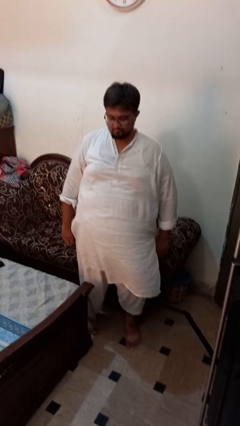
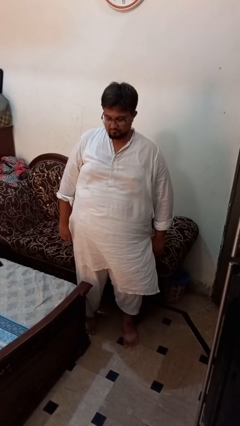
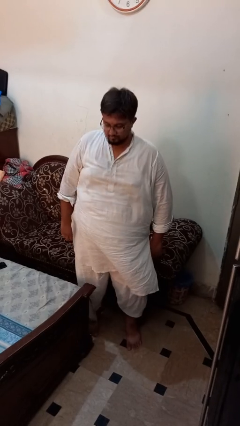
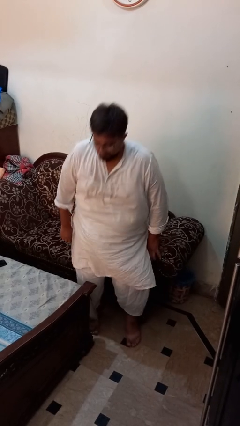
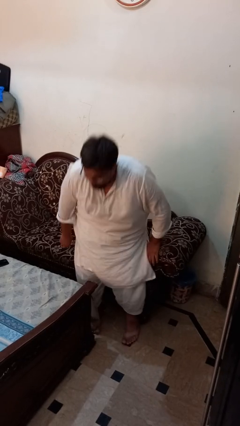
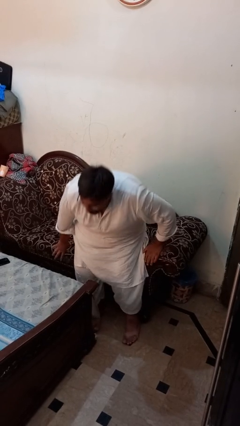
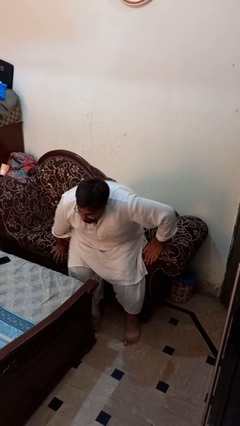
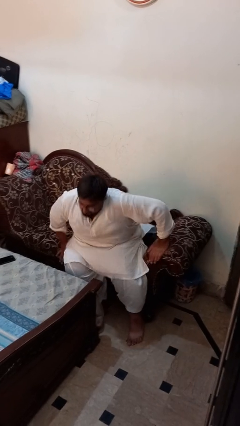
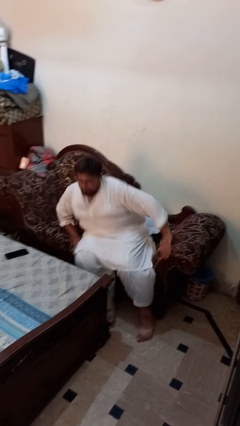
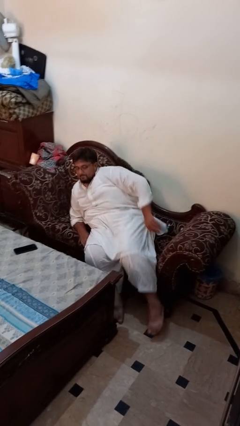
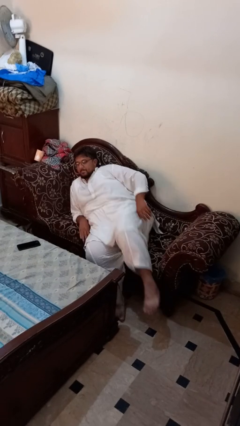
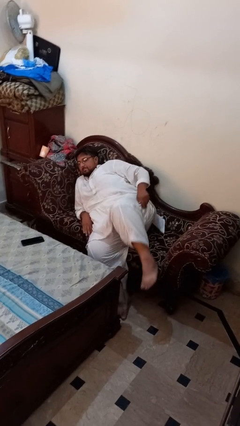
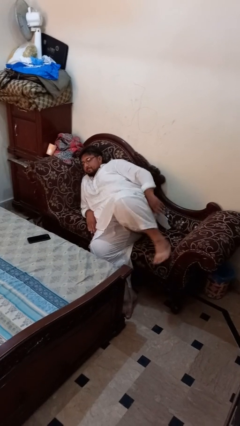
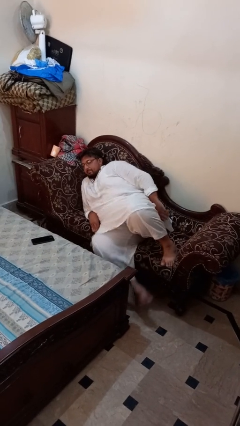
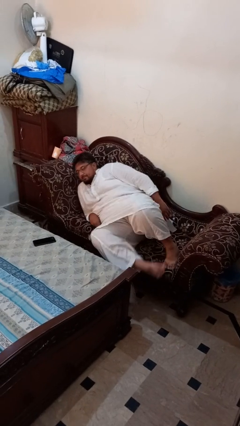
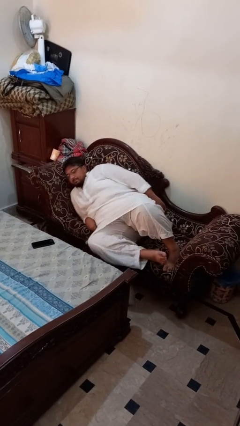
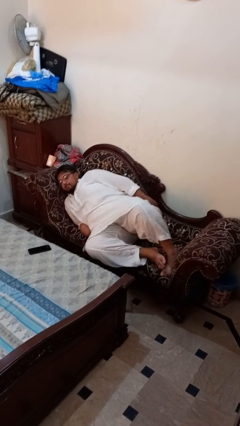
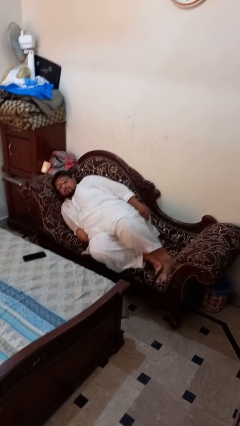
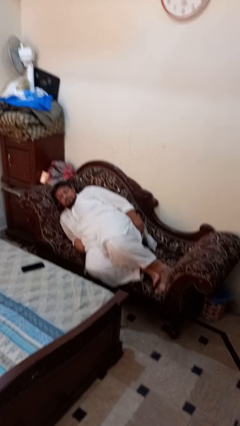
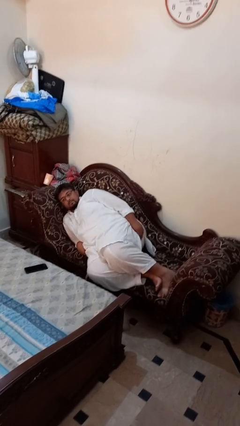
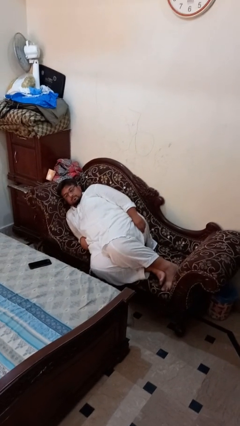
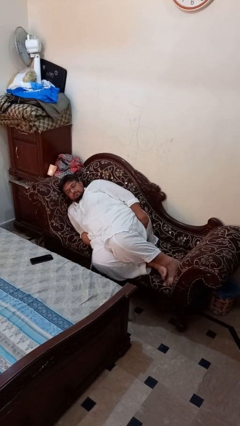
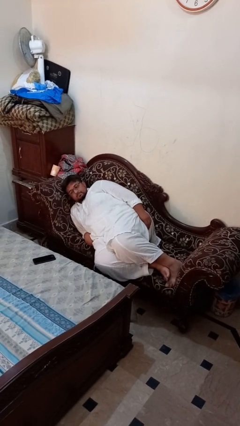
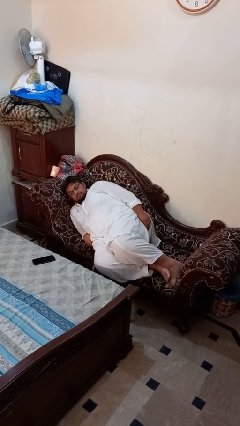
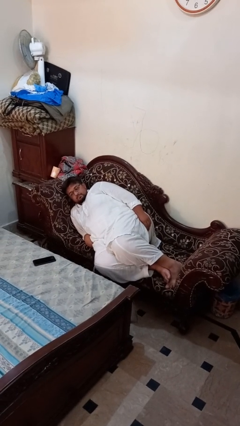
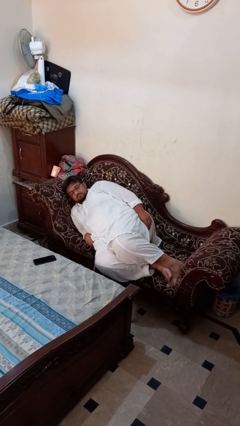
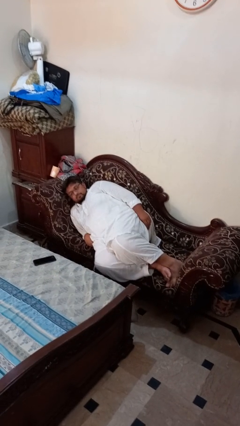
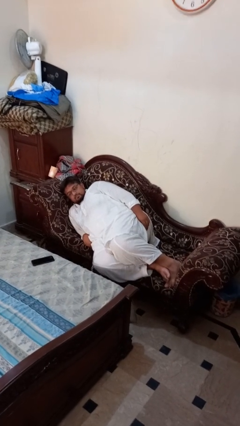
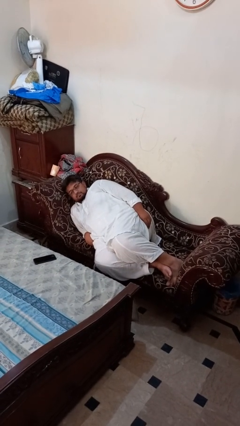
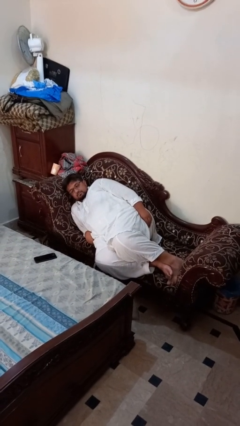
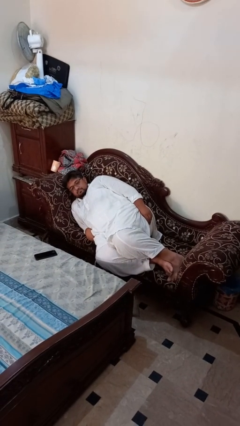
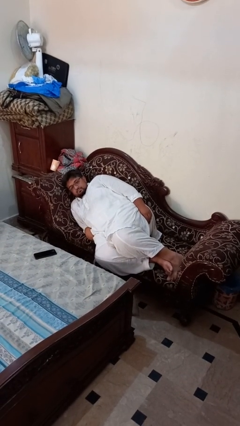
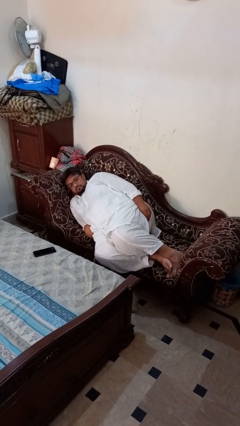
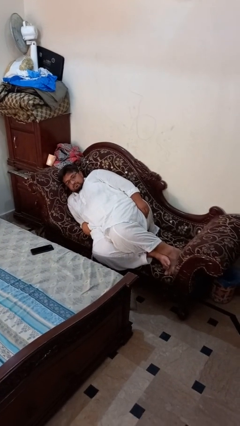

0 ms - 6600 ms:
person lies down on couch

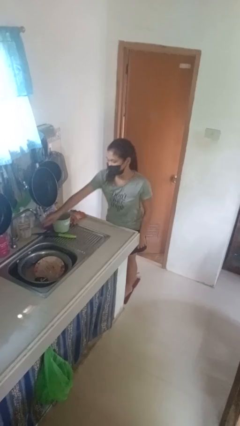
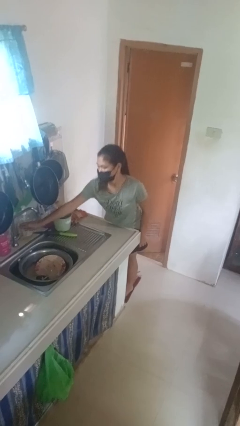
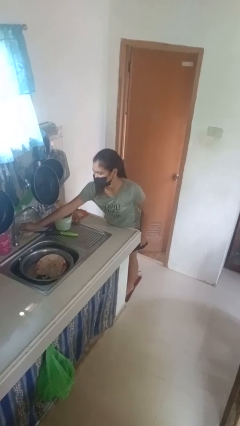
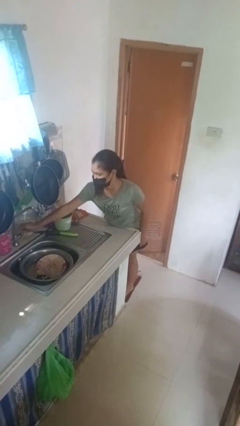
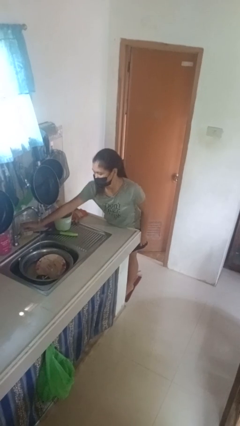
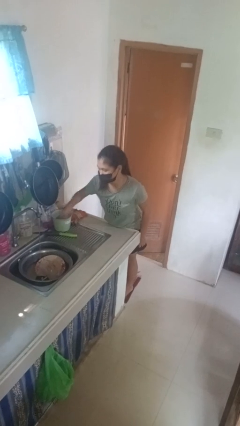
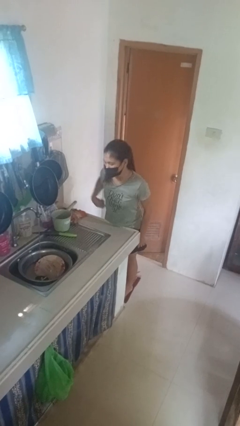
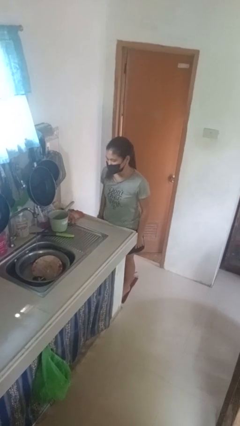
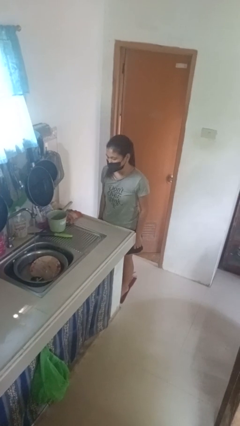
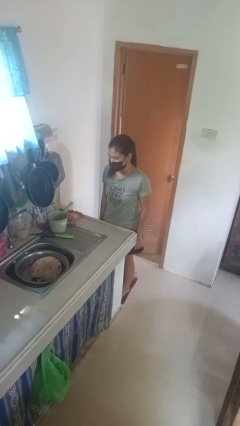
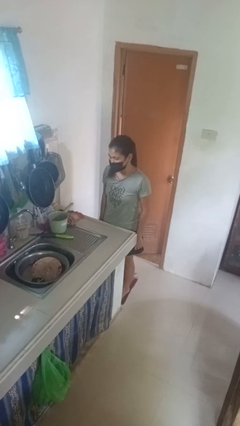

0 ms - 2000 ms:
person turns on faucet

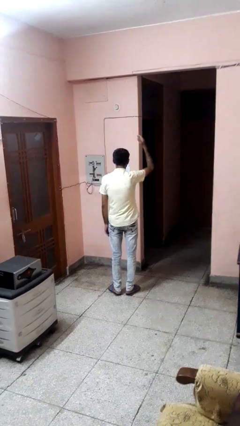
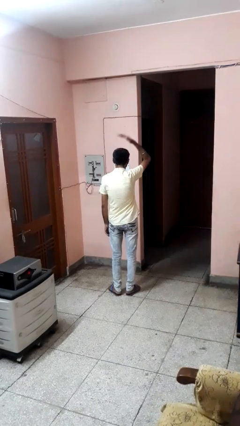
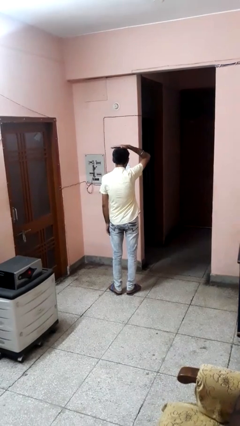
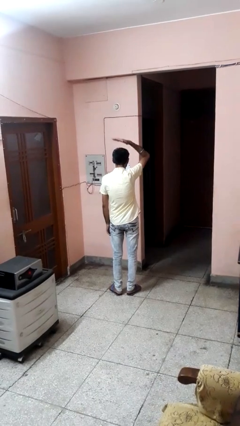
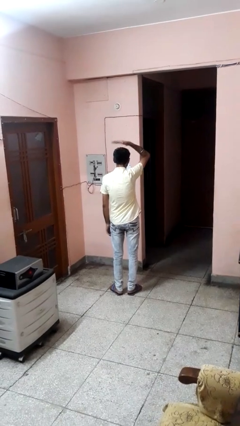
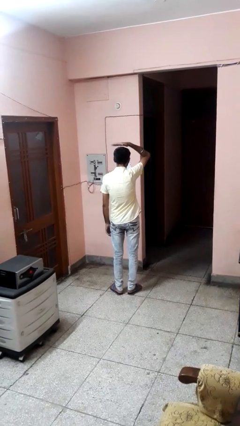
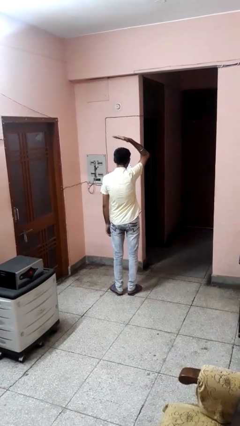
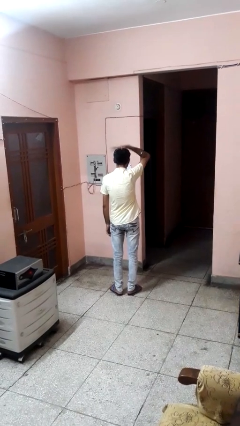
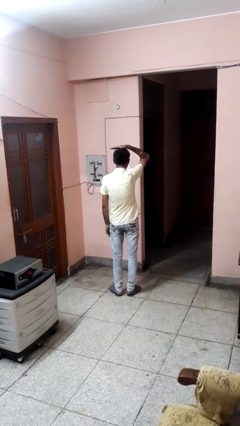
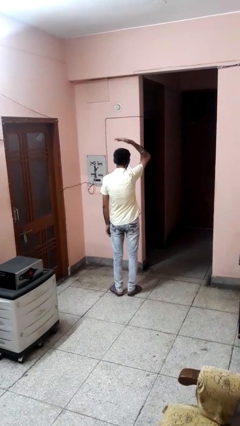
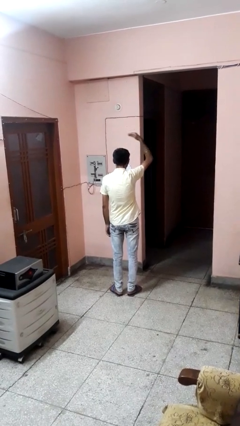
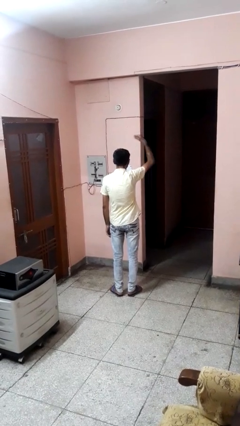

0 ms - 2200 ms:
person pats head

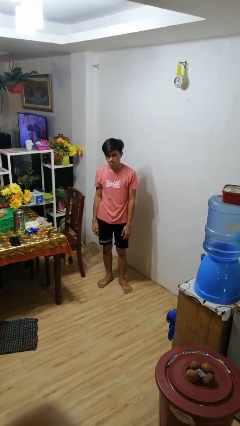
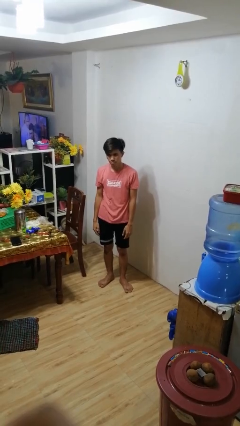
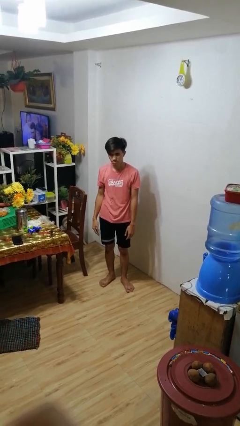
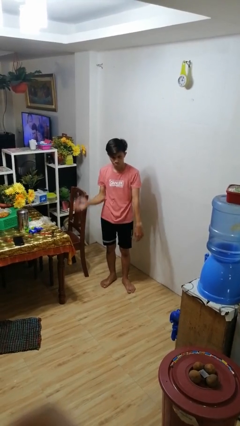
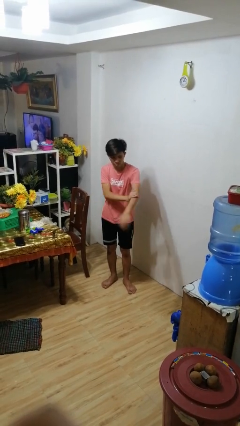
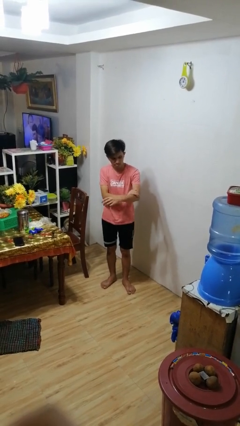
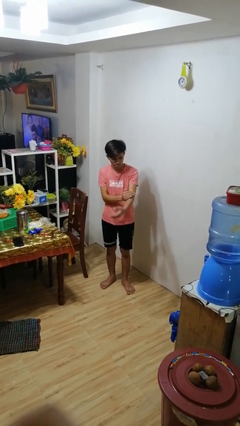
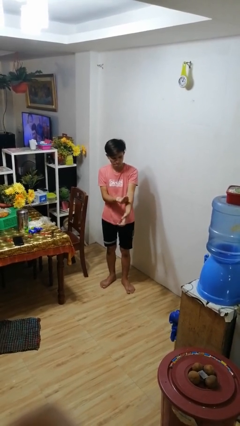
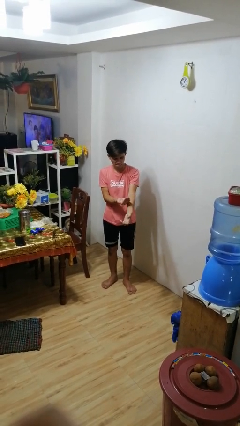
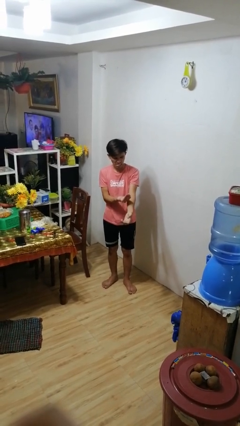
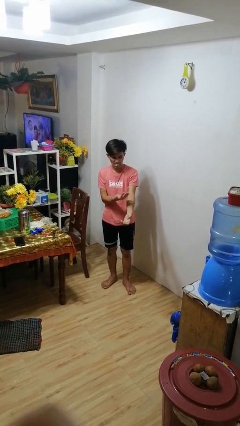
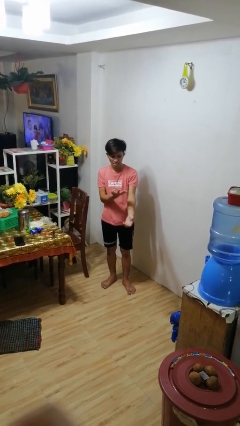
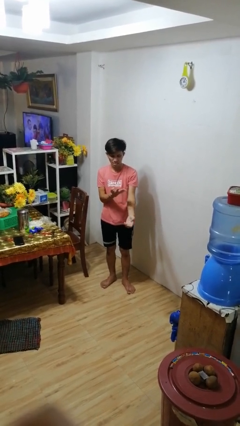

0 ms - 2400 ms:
person swats bug

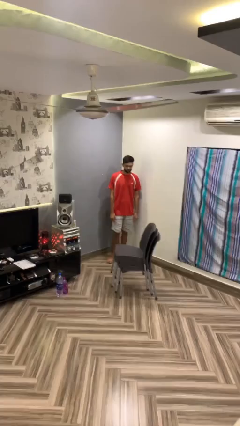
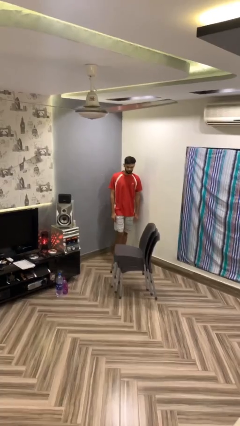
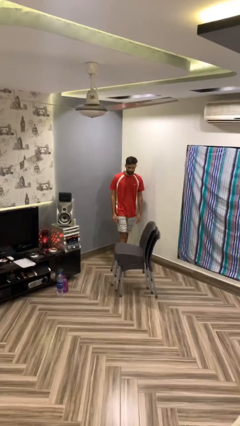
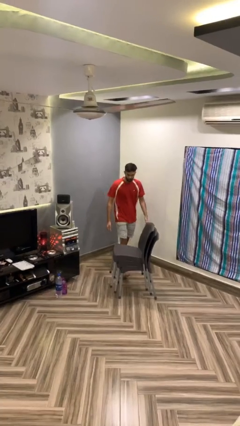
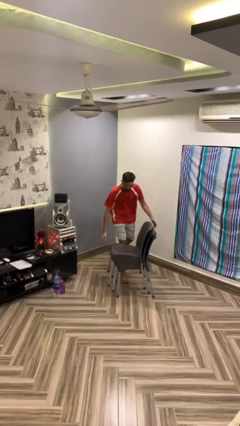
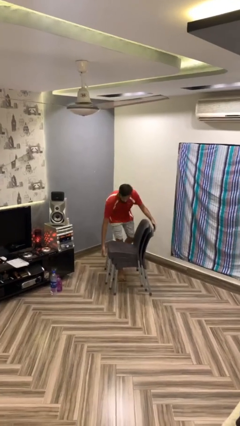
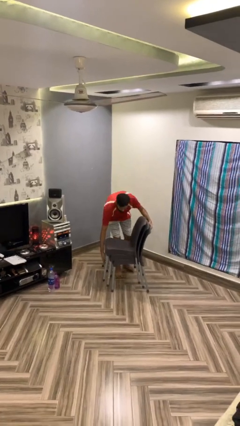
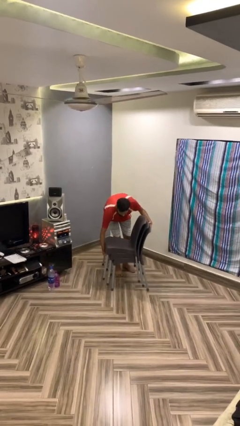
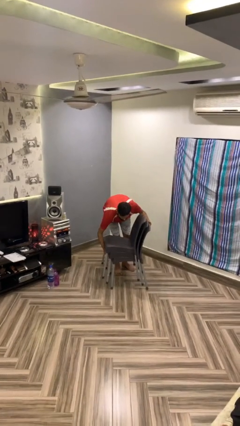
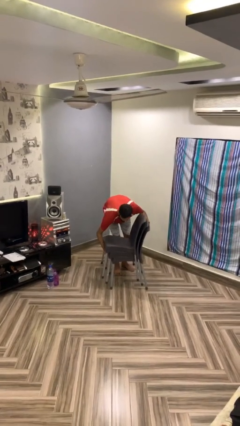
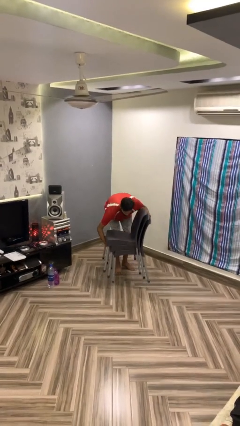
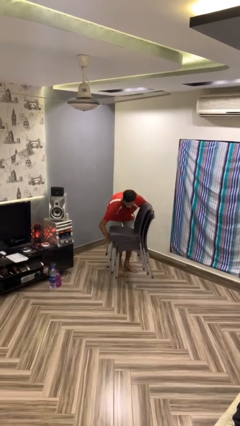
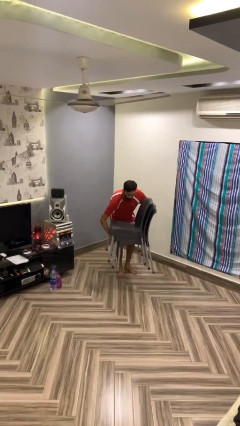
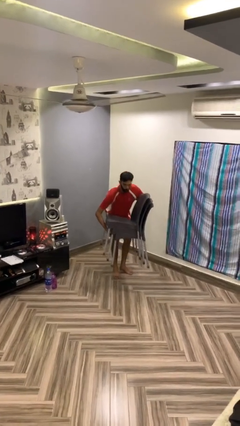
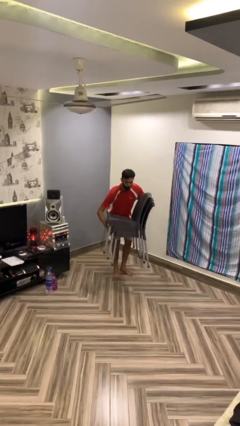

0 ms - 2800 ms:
person picks up object from floor

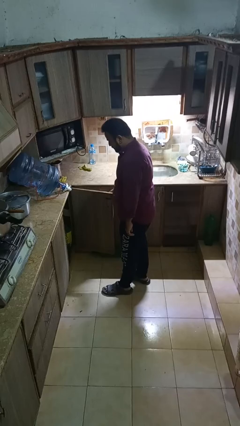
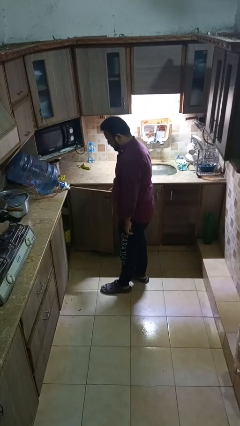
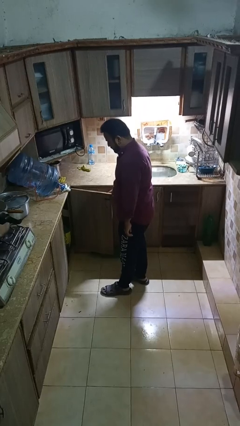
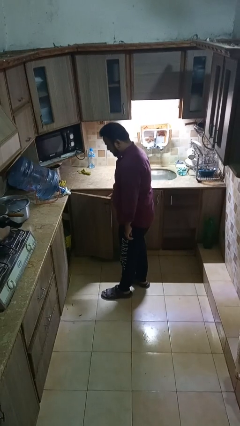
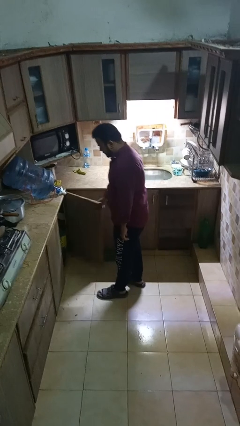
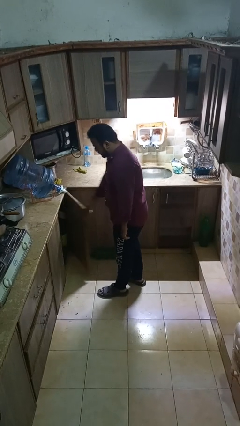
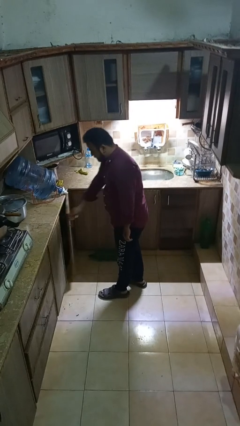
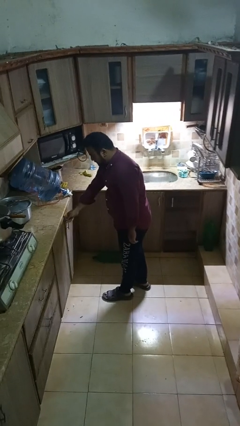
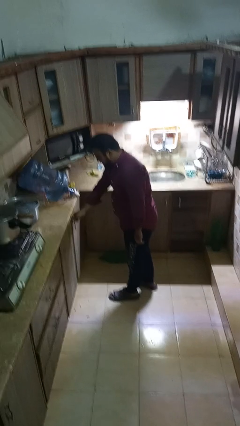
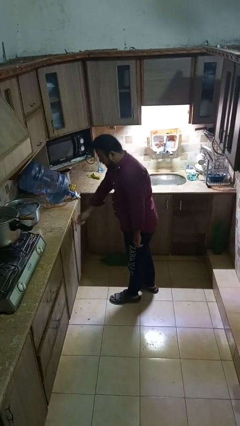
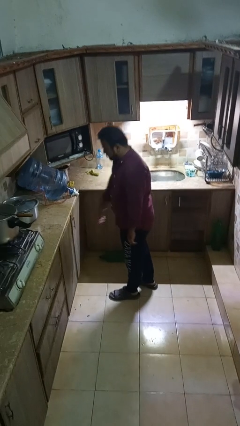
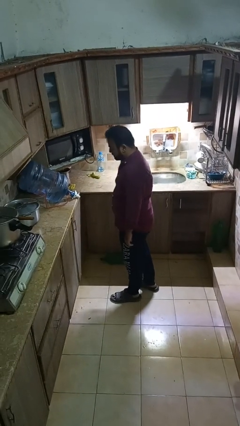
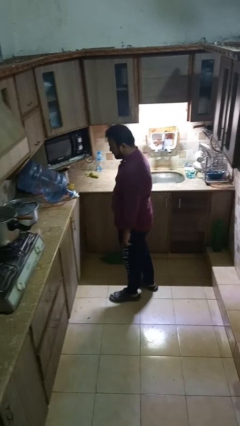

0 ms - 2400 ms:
person closes cabinet
